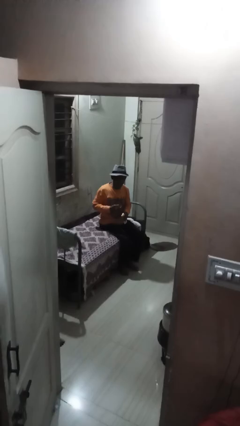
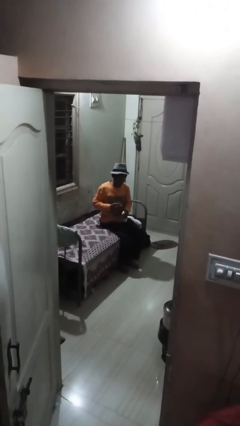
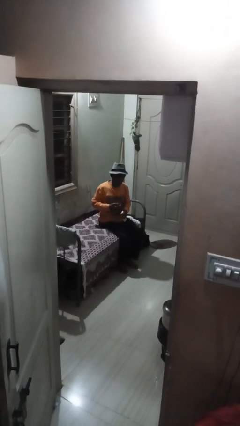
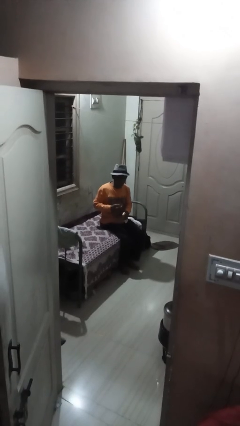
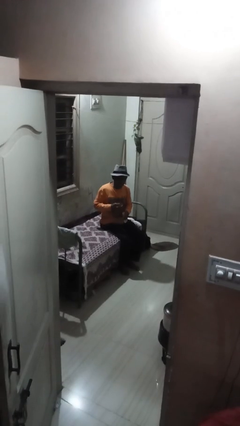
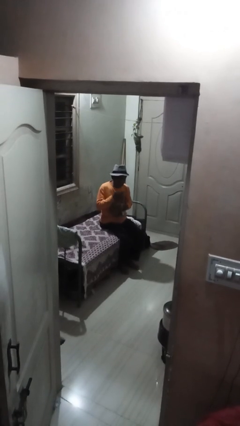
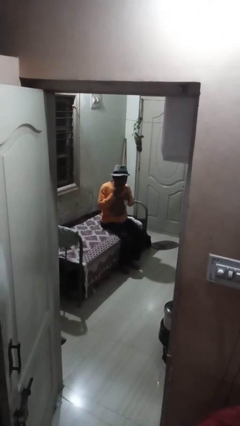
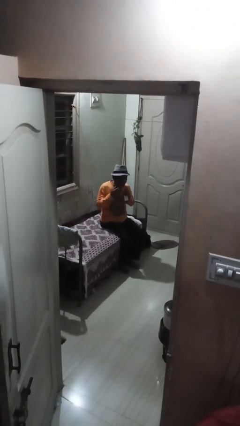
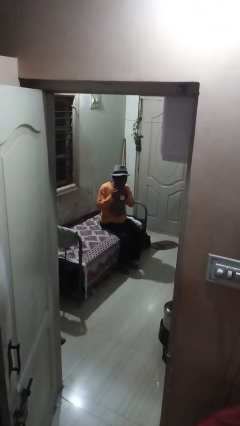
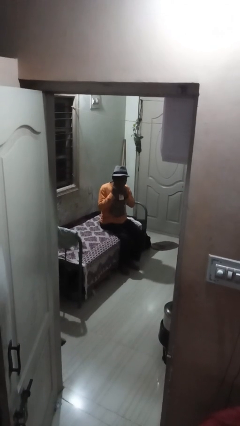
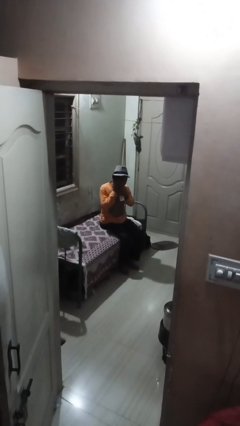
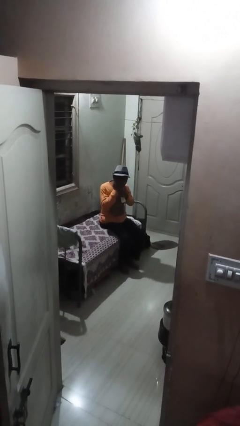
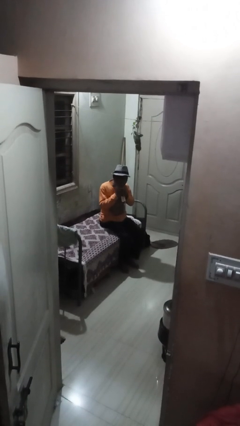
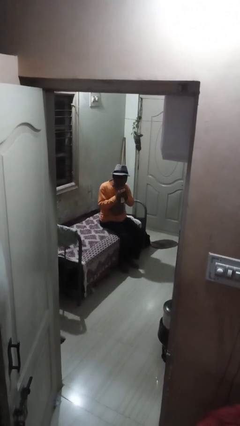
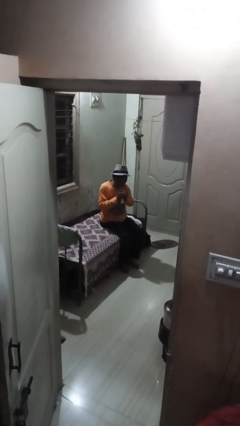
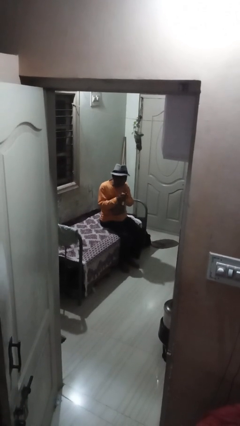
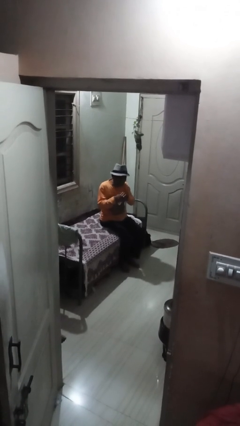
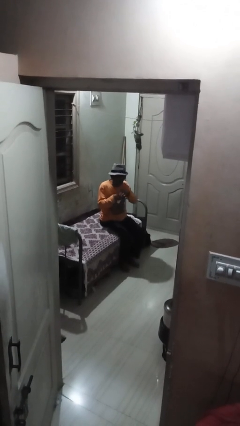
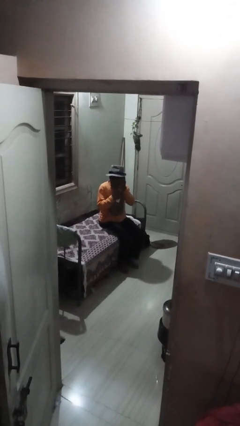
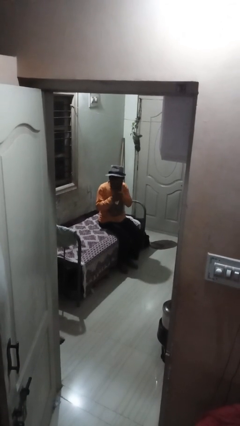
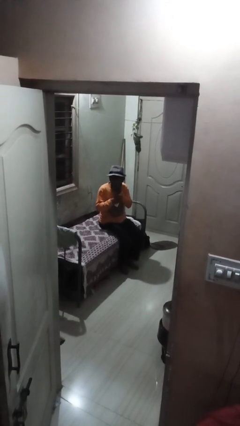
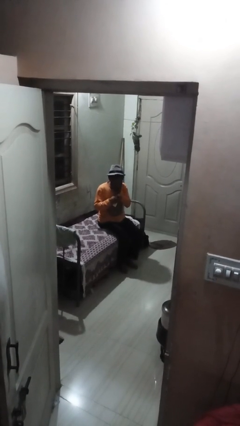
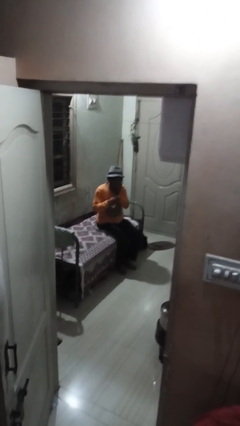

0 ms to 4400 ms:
person applies facial moisturizer

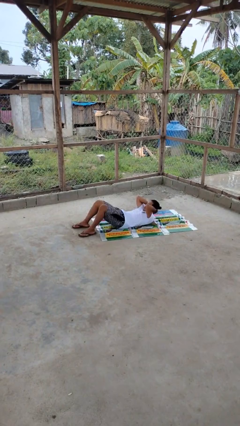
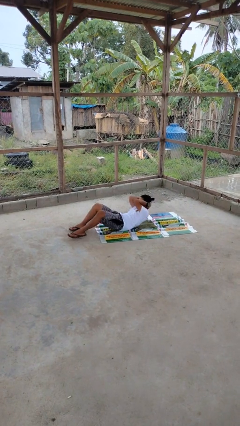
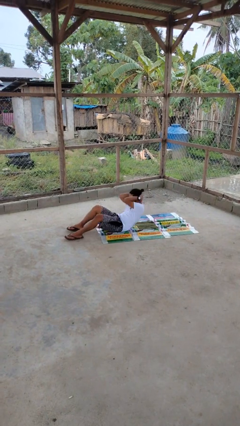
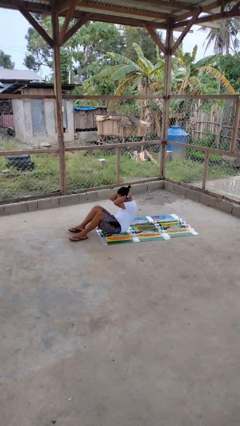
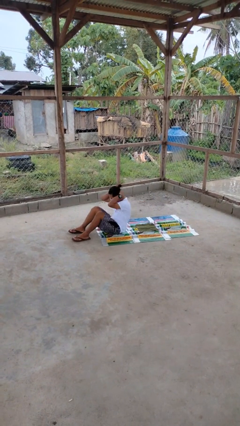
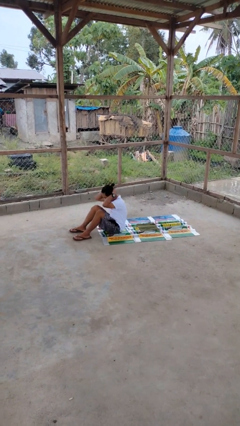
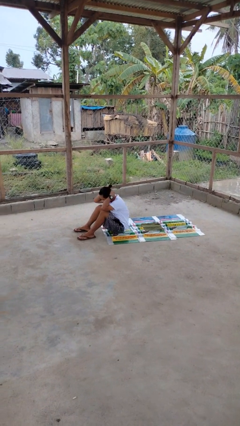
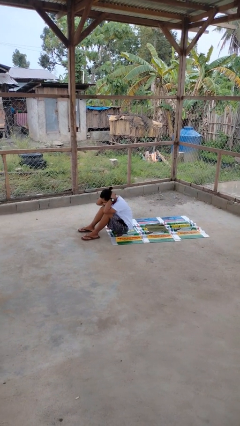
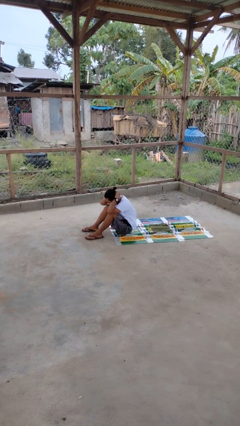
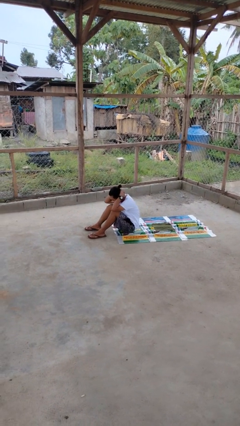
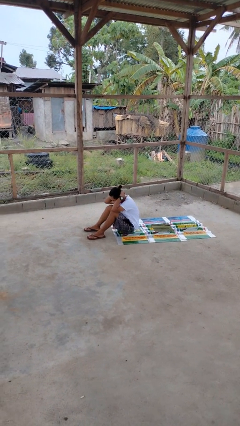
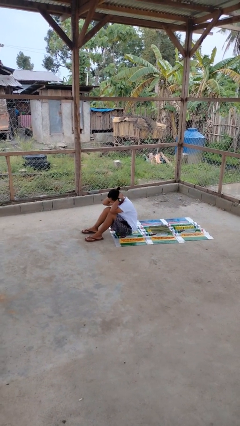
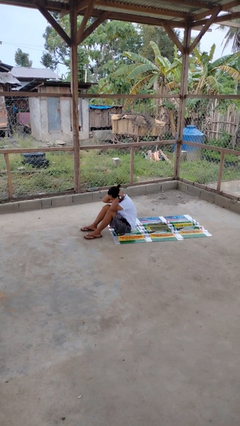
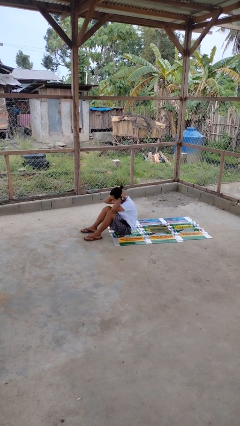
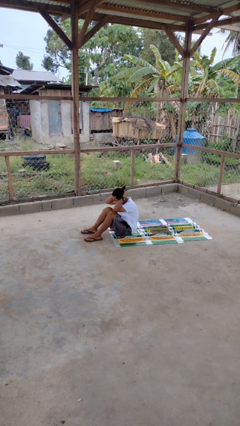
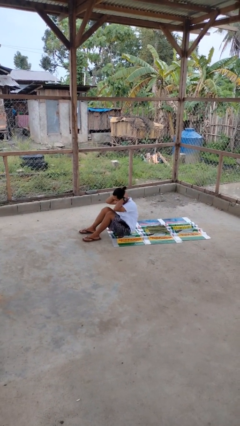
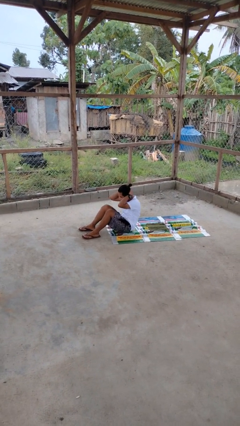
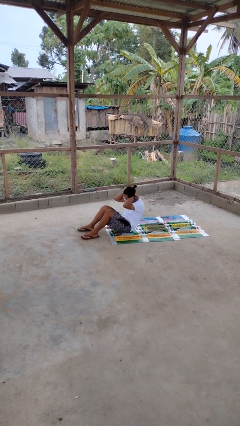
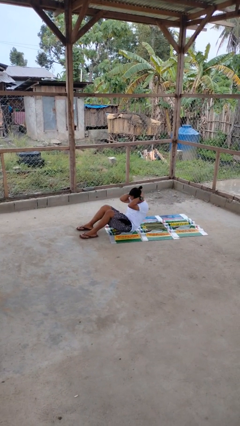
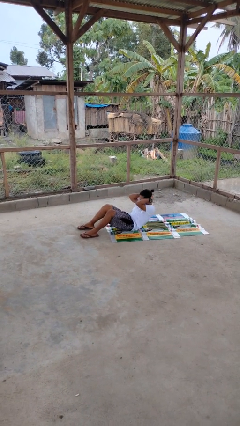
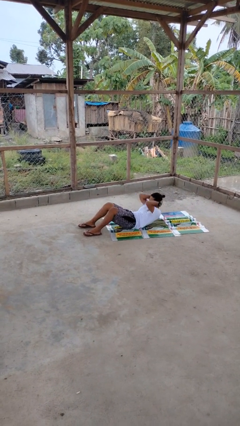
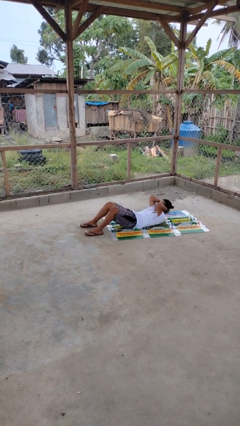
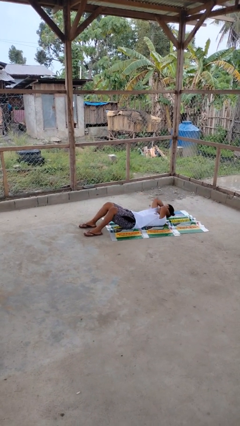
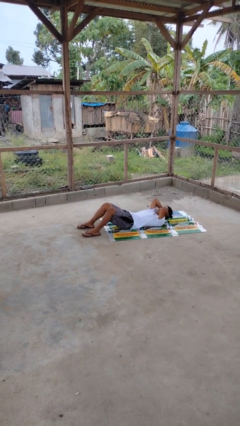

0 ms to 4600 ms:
person exercises with situp

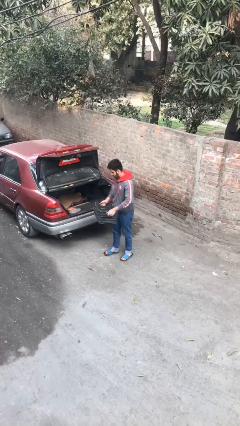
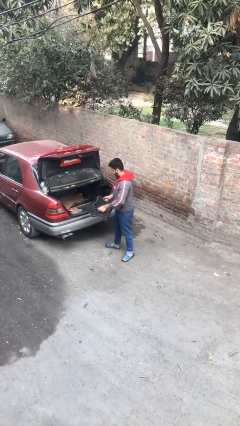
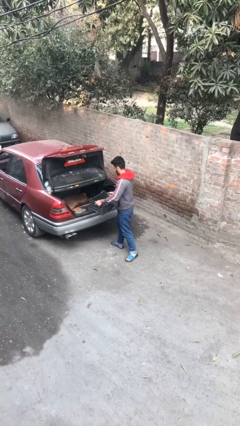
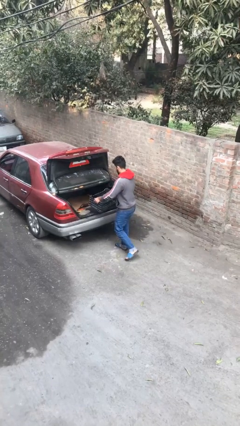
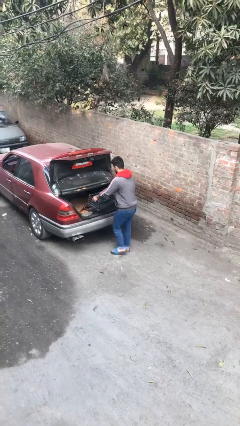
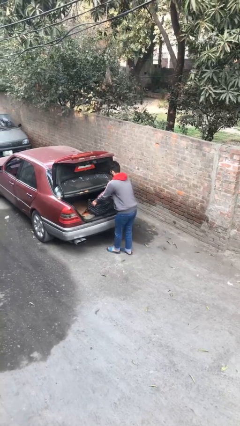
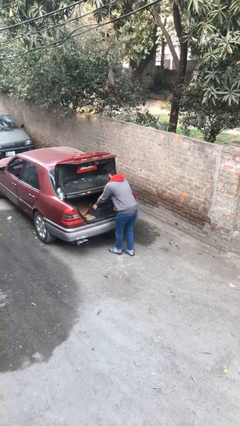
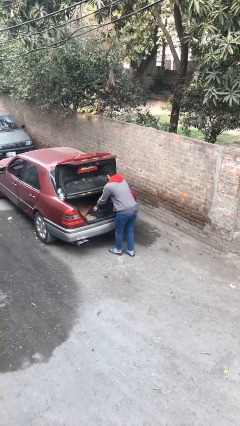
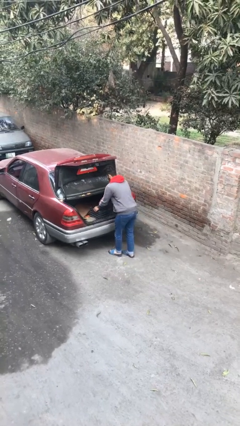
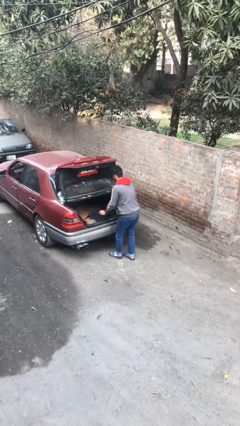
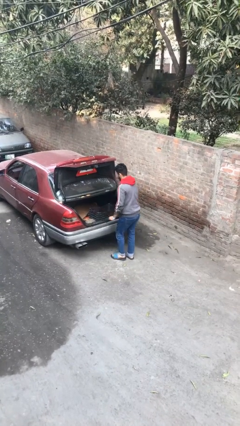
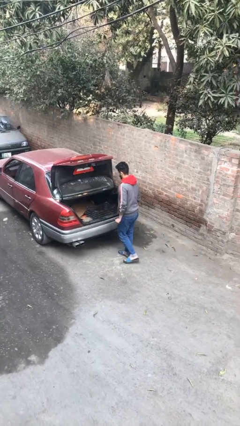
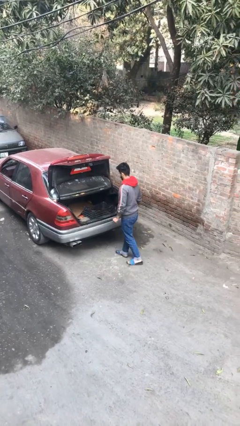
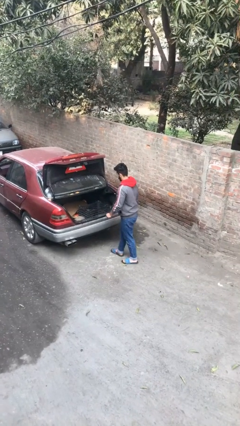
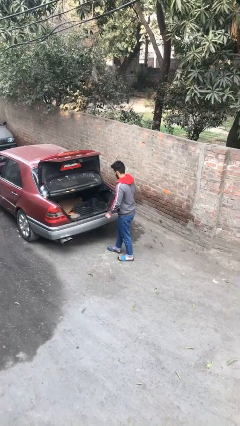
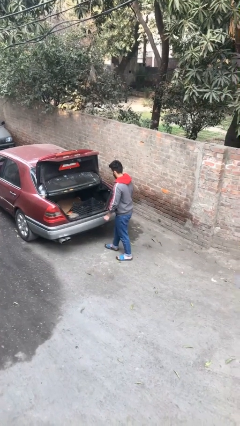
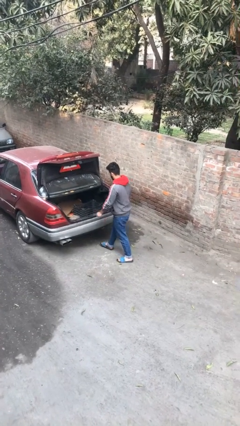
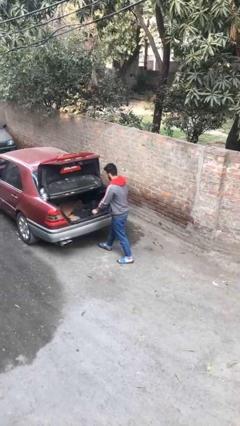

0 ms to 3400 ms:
person loads car

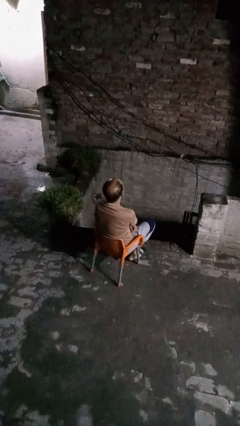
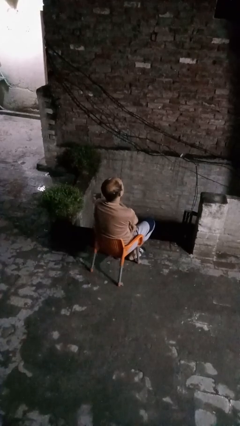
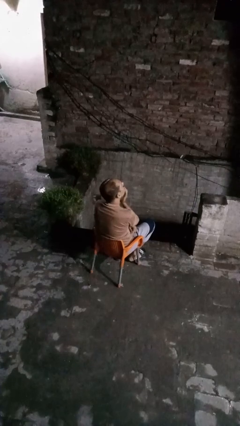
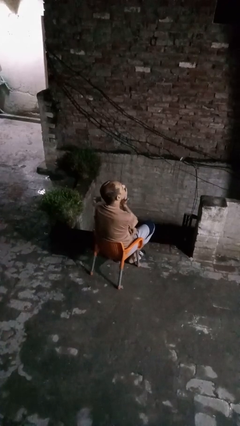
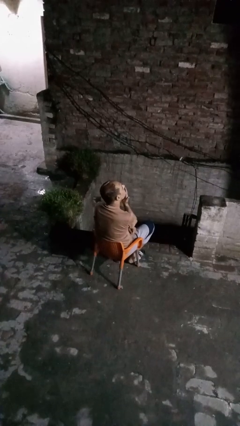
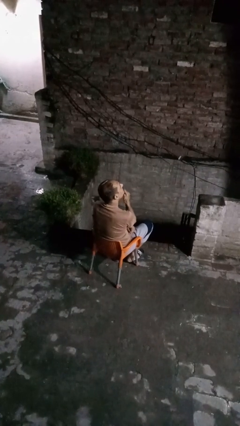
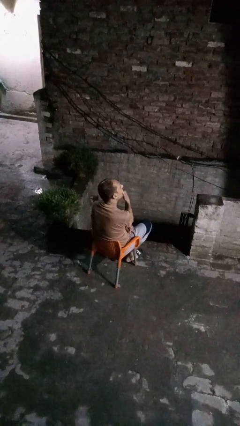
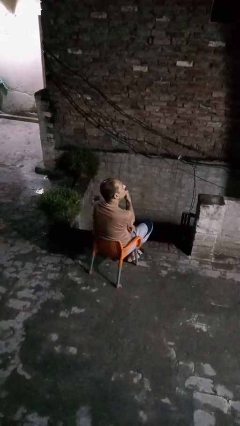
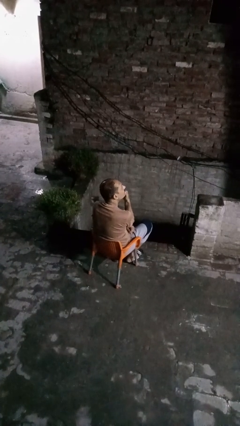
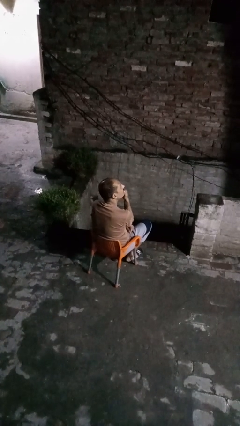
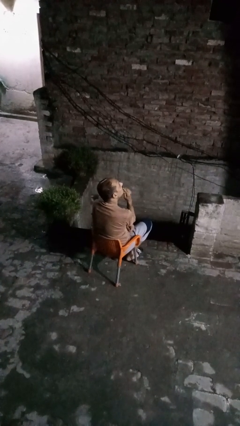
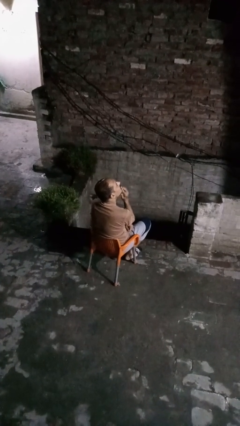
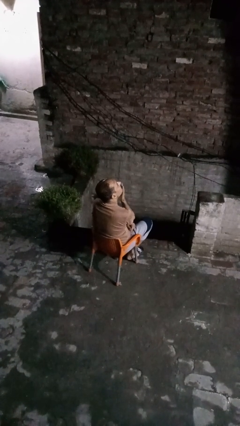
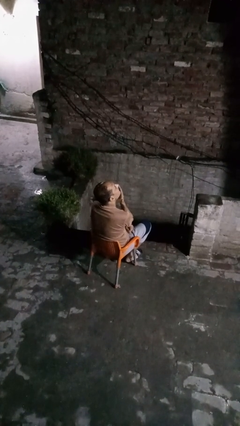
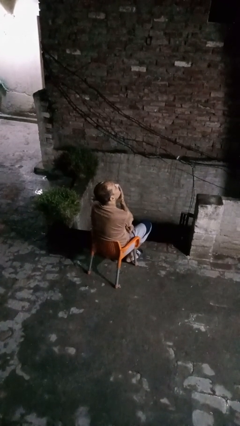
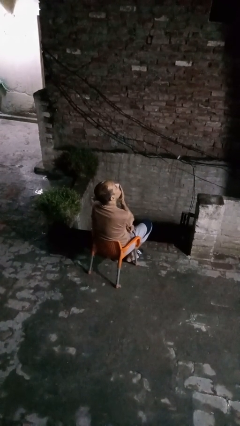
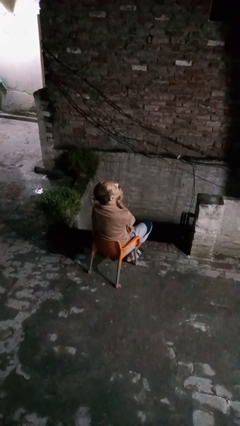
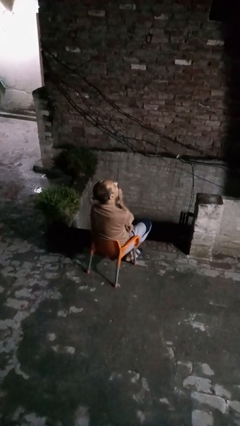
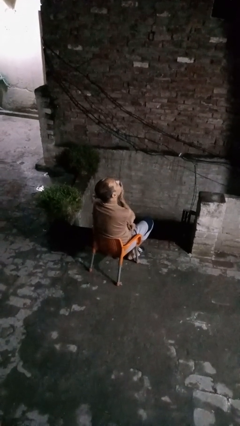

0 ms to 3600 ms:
person strokes chin

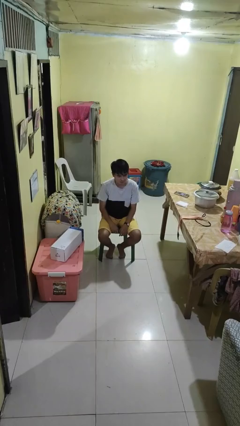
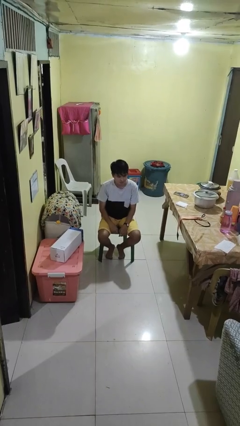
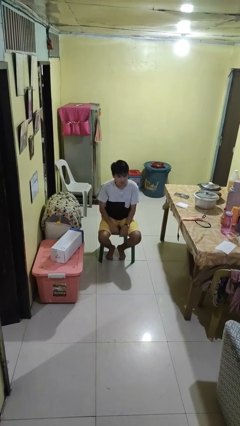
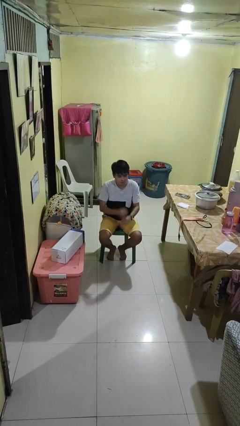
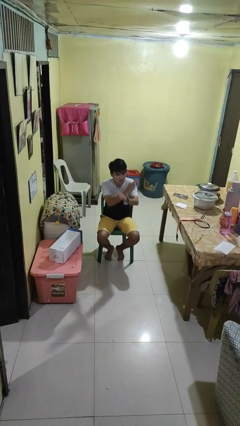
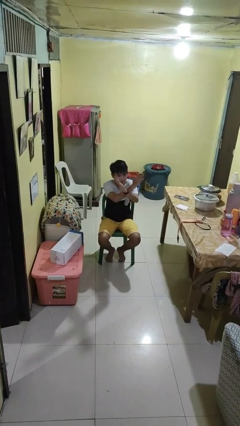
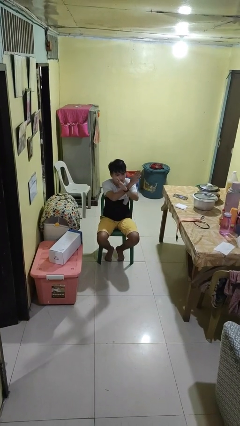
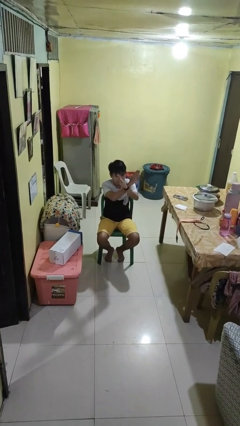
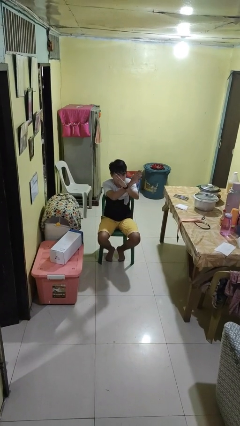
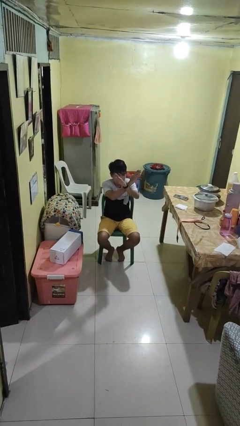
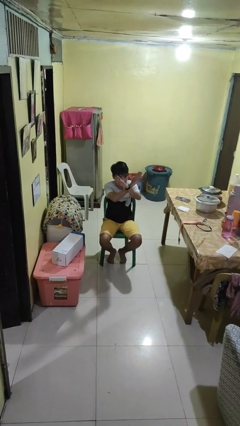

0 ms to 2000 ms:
person gestures arms x
